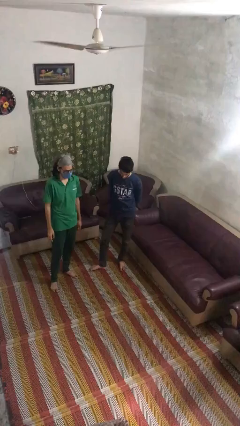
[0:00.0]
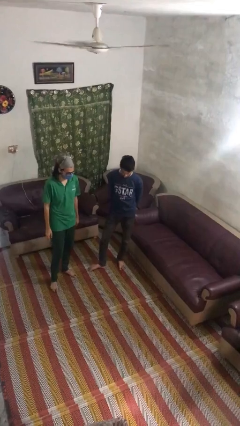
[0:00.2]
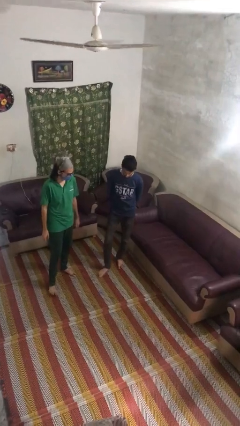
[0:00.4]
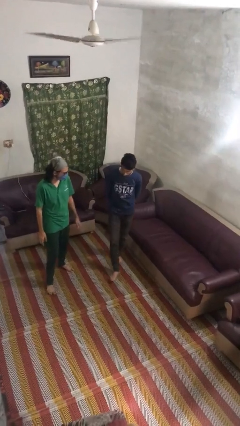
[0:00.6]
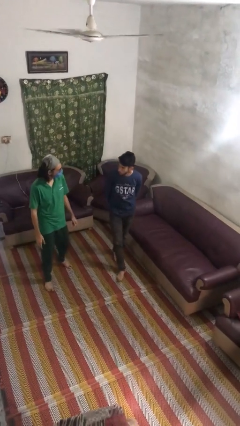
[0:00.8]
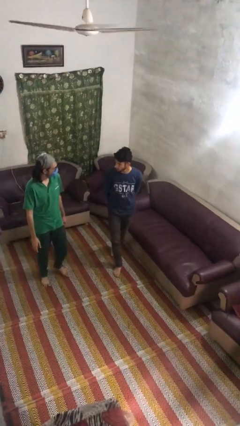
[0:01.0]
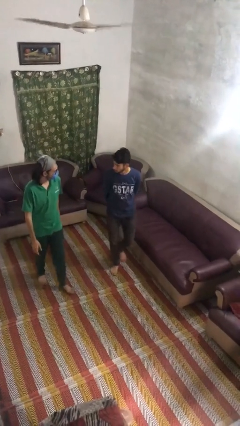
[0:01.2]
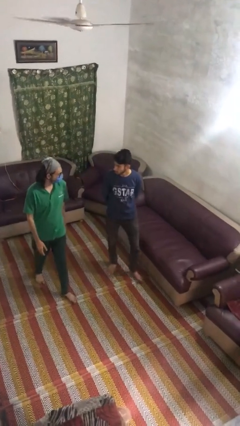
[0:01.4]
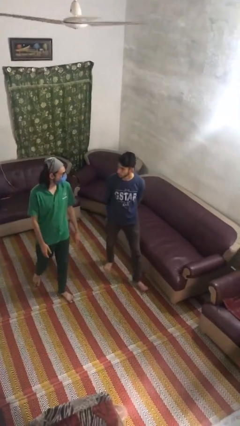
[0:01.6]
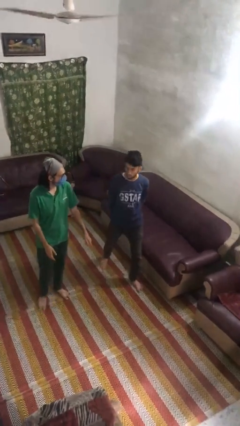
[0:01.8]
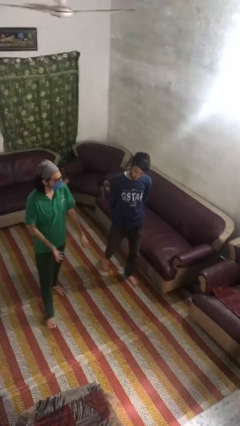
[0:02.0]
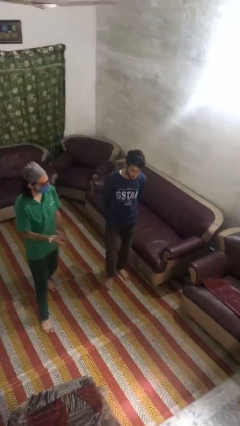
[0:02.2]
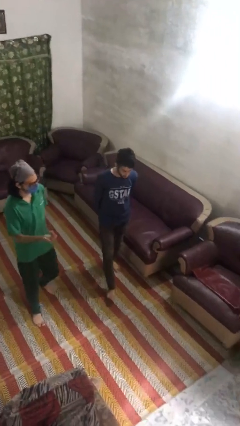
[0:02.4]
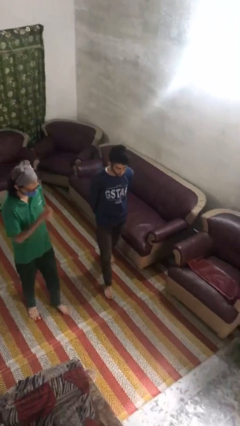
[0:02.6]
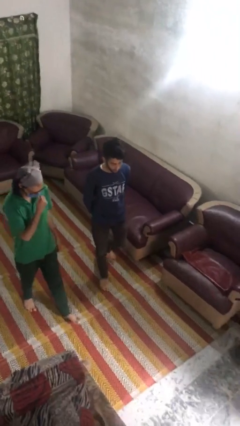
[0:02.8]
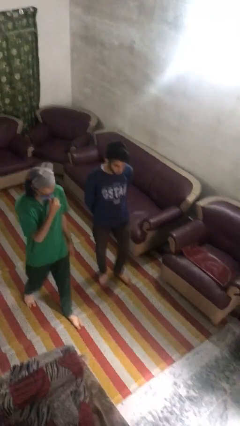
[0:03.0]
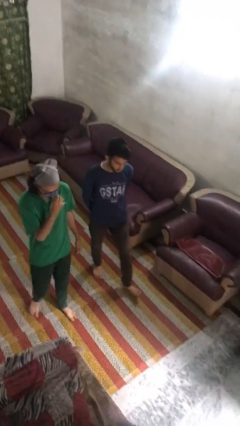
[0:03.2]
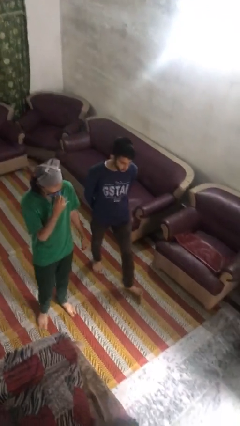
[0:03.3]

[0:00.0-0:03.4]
person talks to person

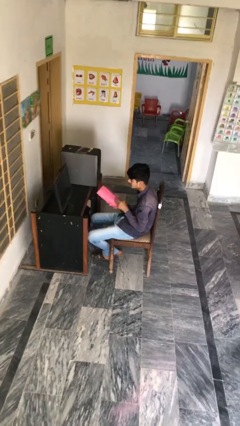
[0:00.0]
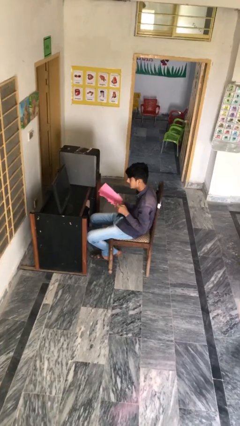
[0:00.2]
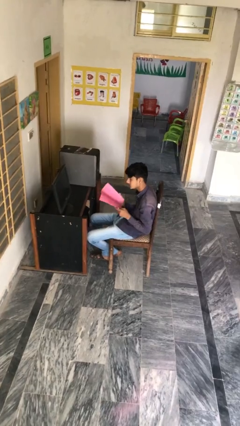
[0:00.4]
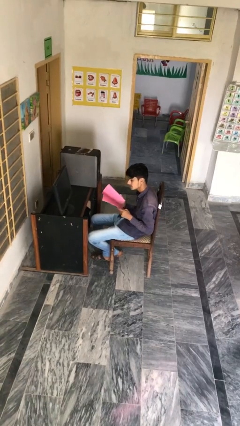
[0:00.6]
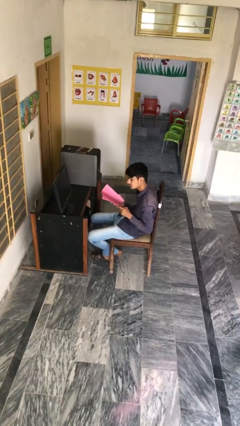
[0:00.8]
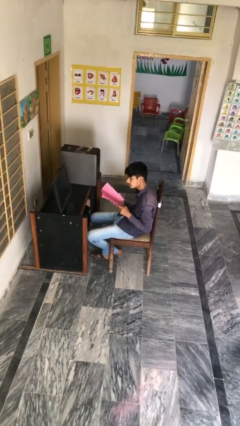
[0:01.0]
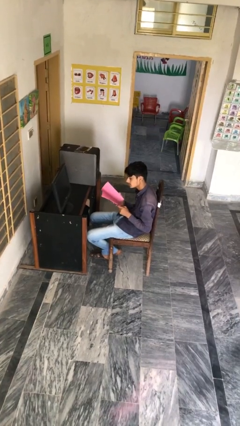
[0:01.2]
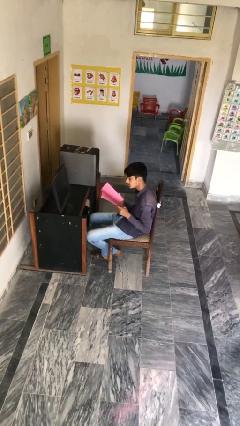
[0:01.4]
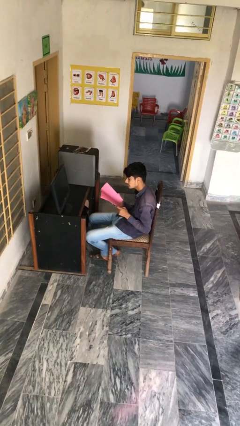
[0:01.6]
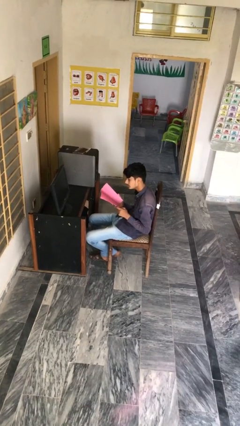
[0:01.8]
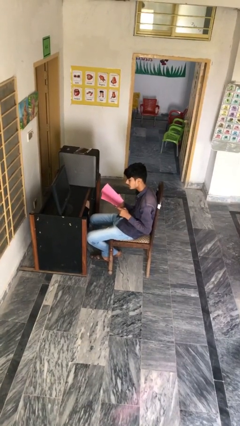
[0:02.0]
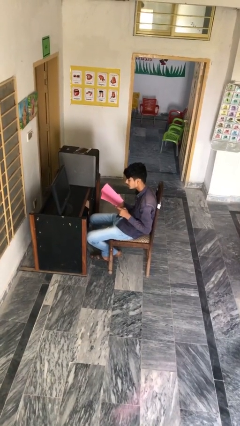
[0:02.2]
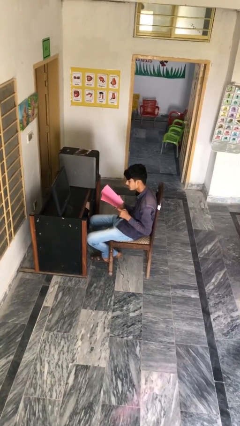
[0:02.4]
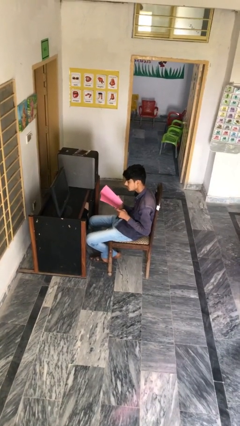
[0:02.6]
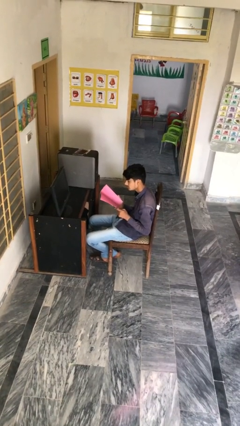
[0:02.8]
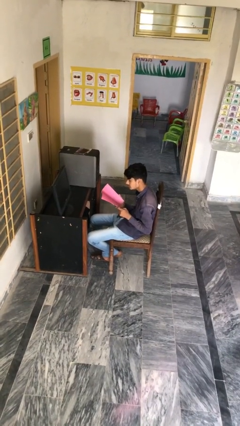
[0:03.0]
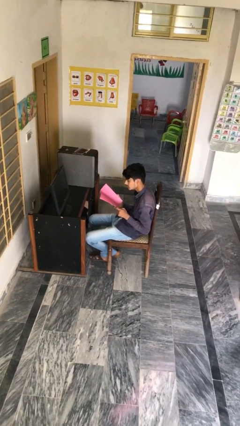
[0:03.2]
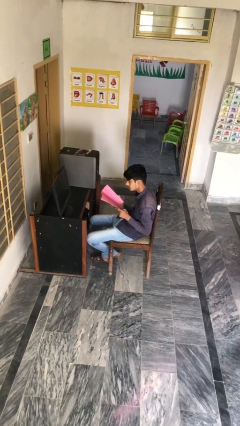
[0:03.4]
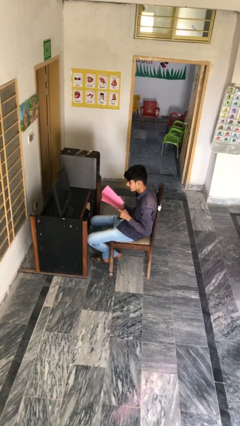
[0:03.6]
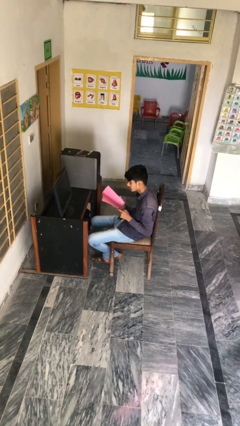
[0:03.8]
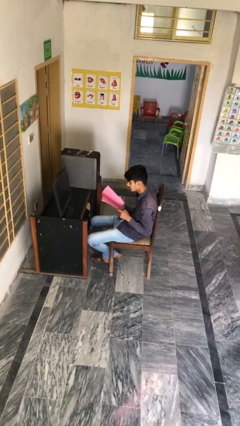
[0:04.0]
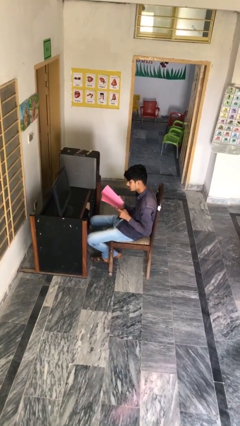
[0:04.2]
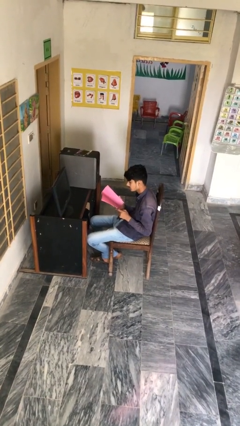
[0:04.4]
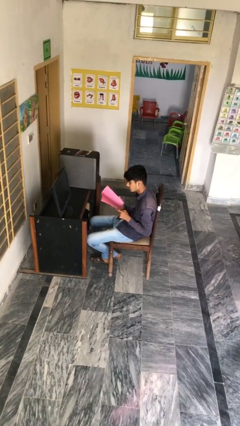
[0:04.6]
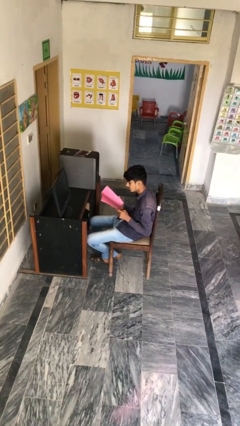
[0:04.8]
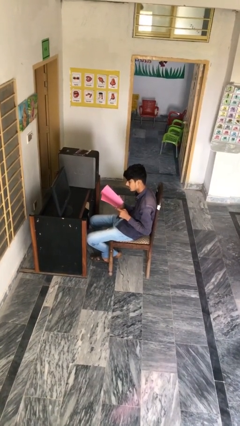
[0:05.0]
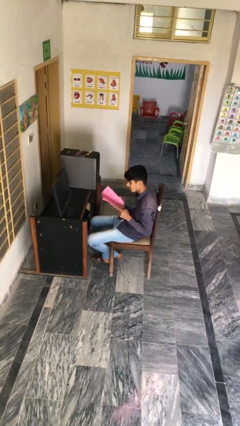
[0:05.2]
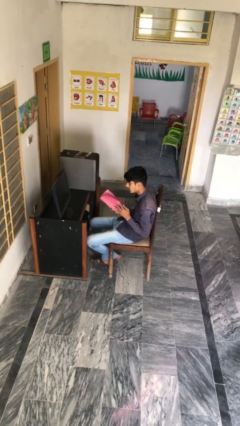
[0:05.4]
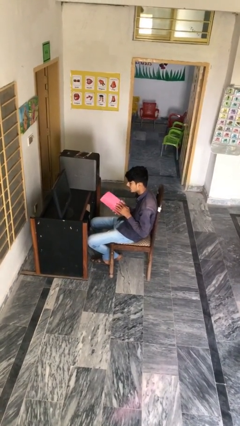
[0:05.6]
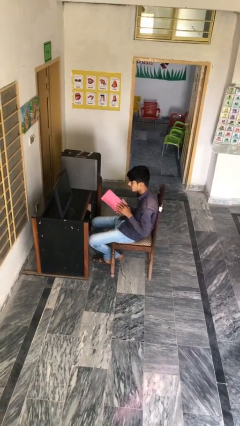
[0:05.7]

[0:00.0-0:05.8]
person reads document

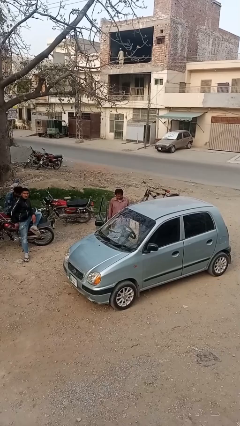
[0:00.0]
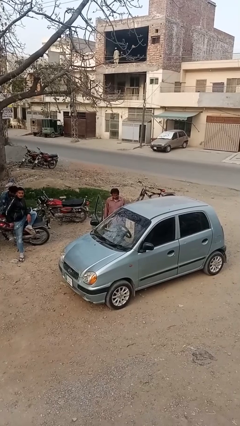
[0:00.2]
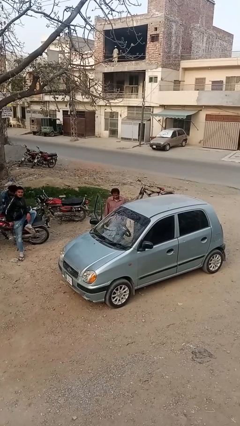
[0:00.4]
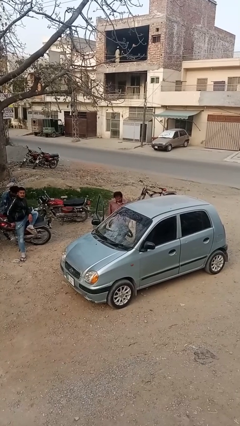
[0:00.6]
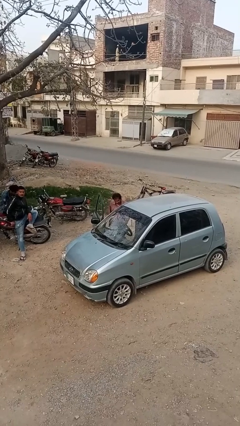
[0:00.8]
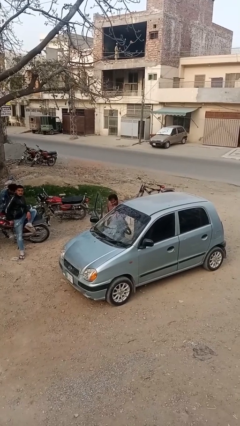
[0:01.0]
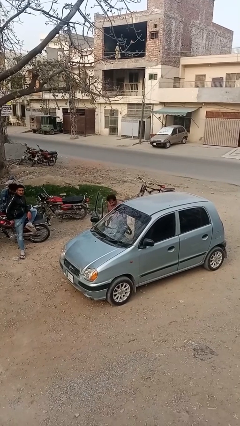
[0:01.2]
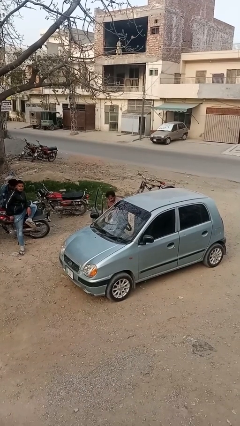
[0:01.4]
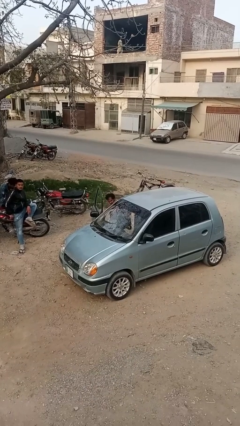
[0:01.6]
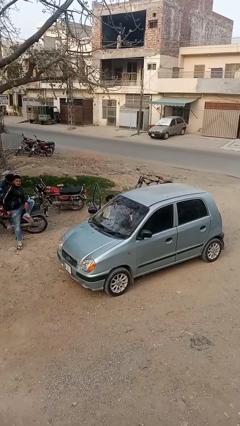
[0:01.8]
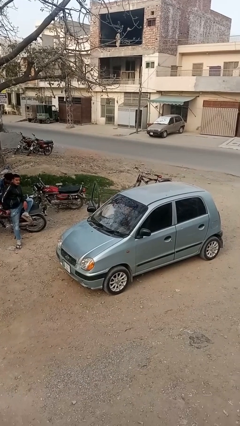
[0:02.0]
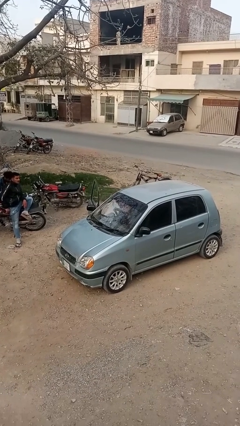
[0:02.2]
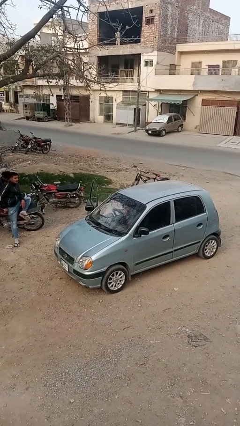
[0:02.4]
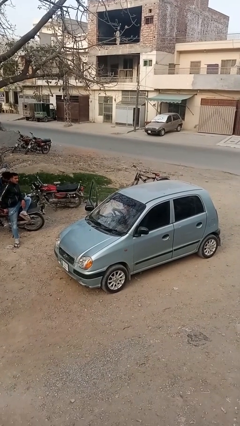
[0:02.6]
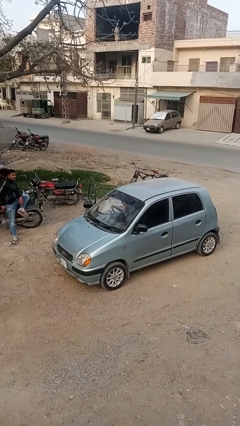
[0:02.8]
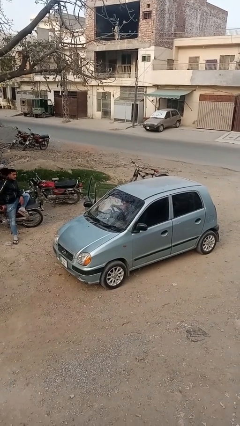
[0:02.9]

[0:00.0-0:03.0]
person enters car

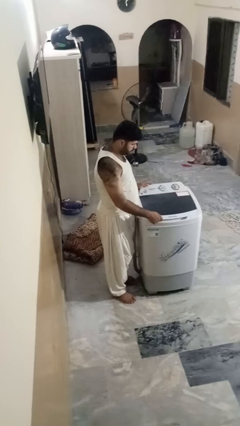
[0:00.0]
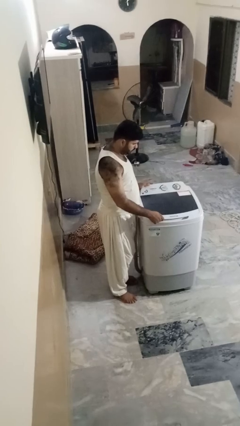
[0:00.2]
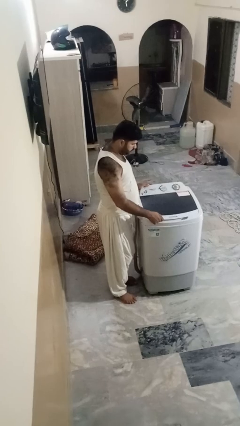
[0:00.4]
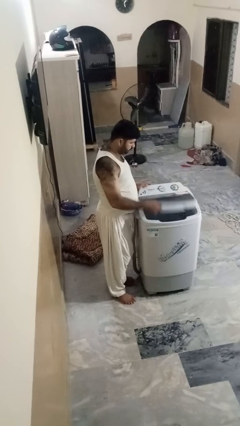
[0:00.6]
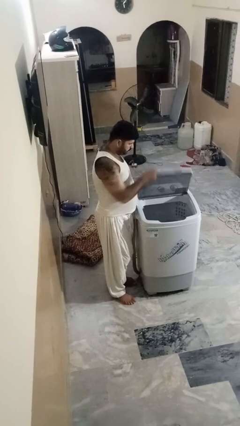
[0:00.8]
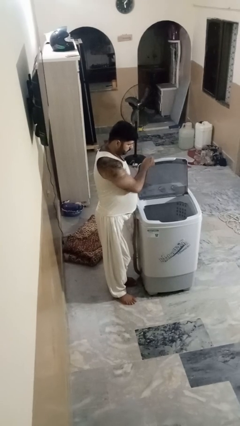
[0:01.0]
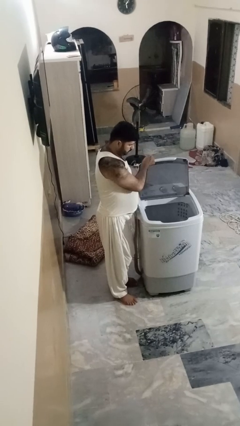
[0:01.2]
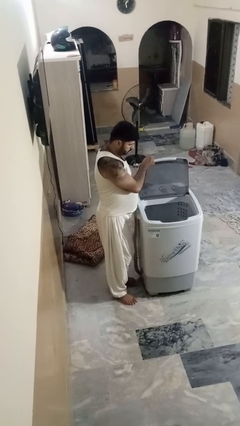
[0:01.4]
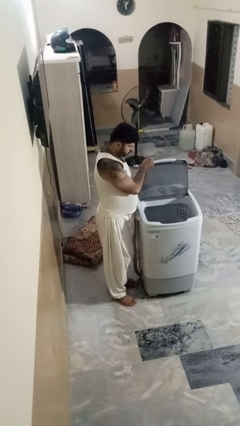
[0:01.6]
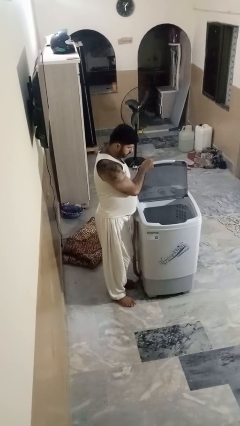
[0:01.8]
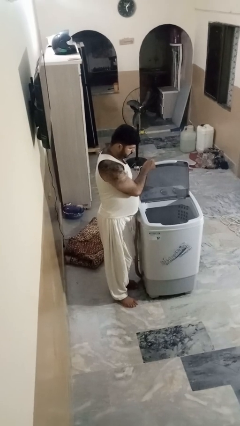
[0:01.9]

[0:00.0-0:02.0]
person opens clothes washer

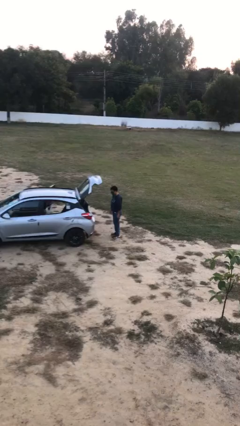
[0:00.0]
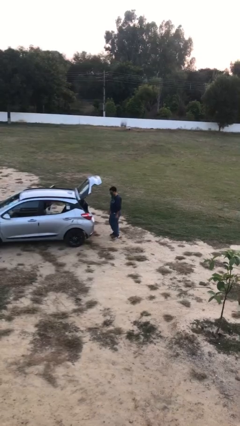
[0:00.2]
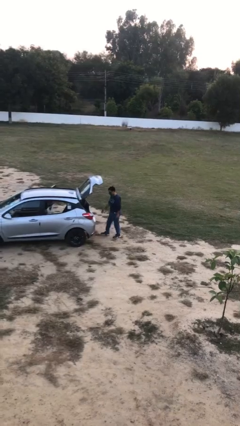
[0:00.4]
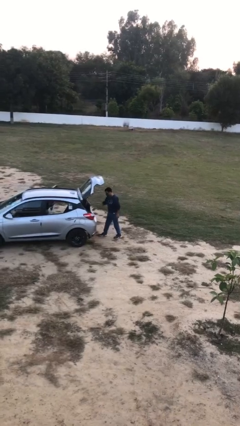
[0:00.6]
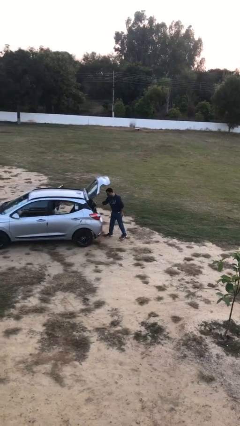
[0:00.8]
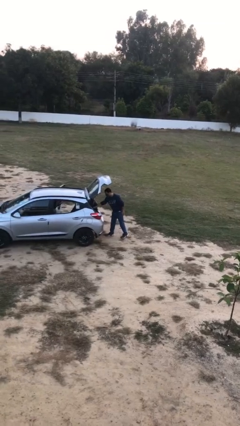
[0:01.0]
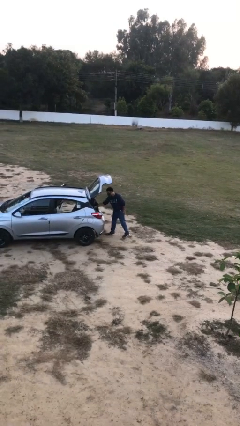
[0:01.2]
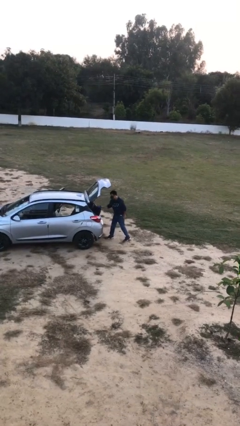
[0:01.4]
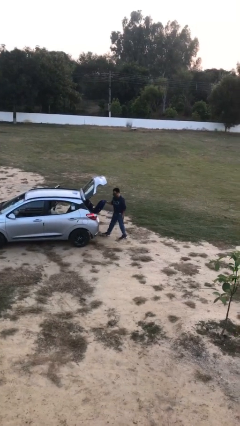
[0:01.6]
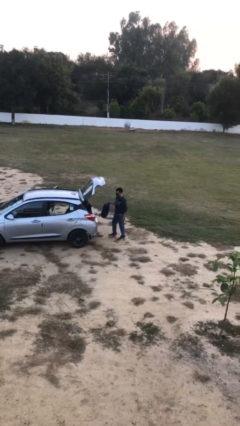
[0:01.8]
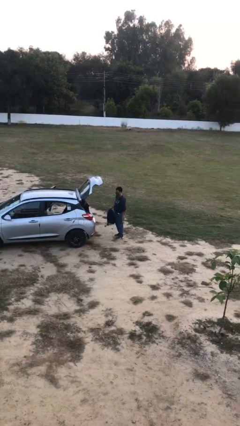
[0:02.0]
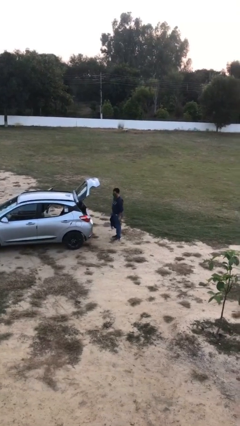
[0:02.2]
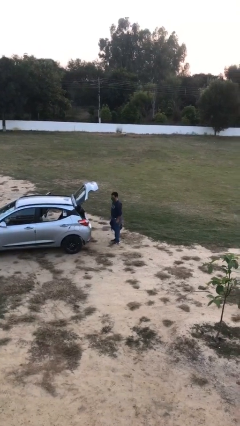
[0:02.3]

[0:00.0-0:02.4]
person unloads car

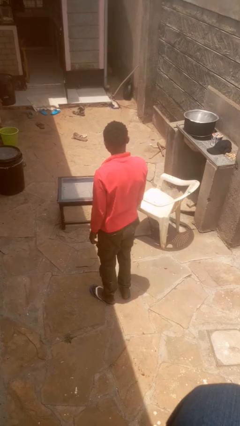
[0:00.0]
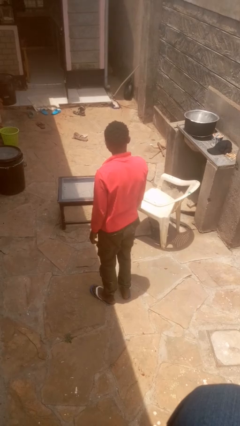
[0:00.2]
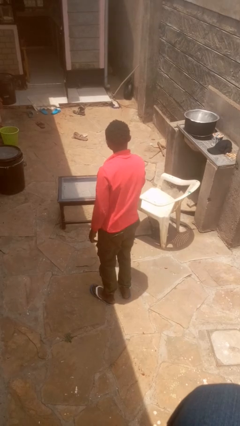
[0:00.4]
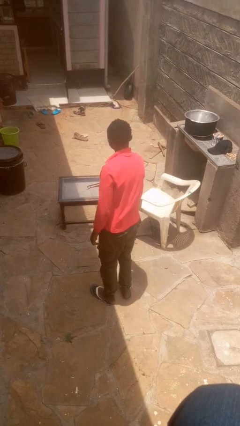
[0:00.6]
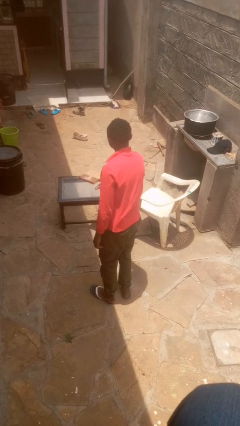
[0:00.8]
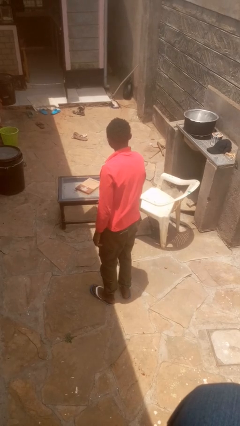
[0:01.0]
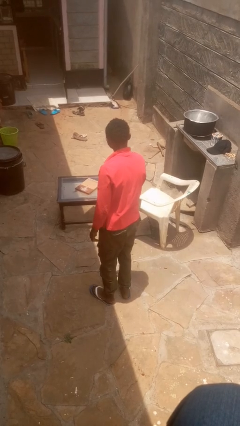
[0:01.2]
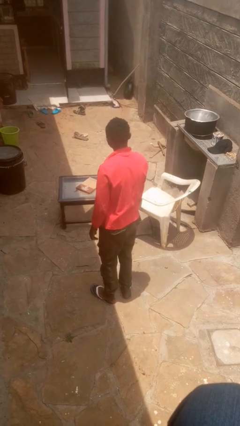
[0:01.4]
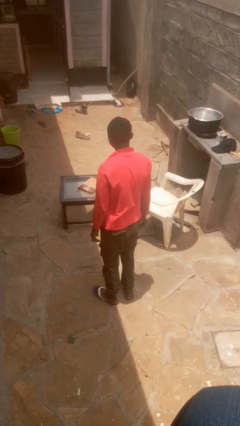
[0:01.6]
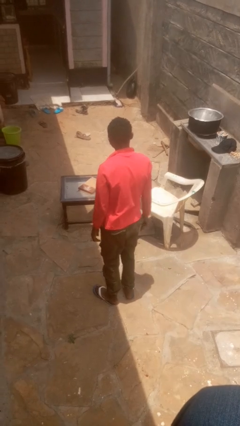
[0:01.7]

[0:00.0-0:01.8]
person throws object on table
